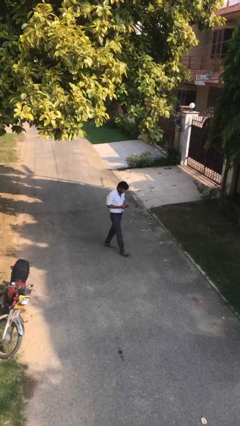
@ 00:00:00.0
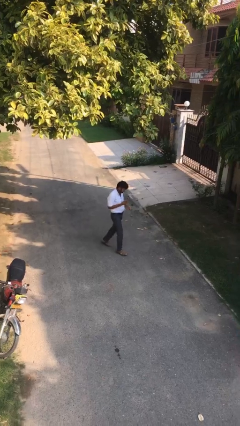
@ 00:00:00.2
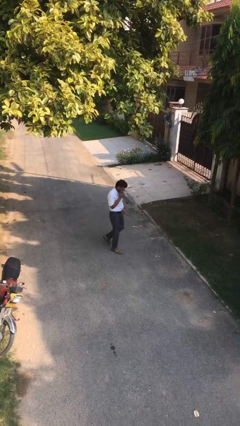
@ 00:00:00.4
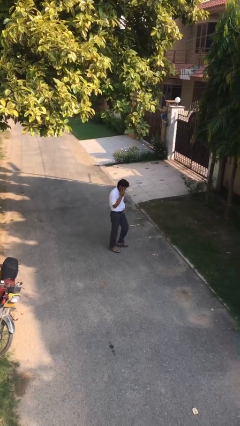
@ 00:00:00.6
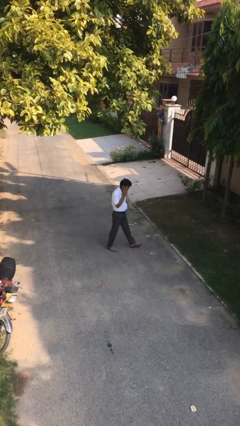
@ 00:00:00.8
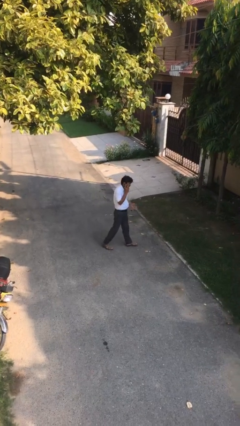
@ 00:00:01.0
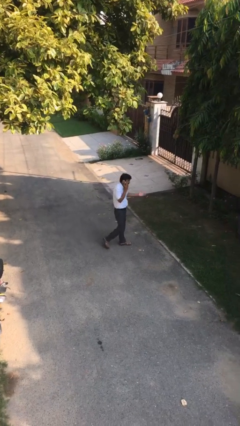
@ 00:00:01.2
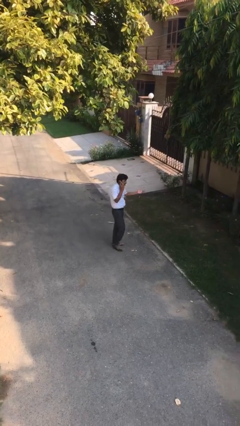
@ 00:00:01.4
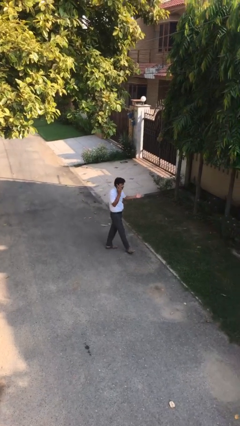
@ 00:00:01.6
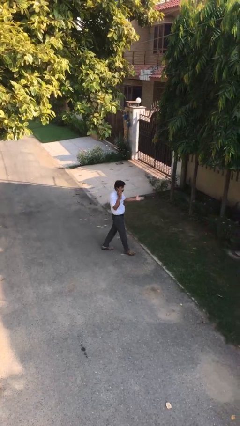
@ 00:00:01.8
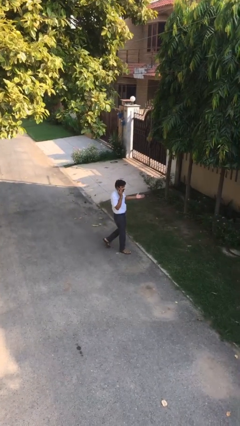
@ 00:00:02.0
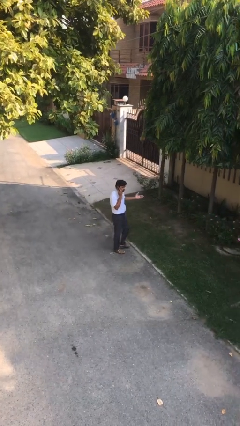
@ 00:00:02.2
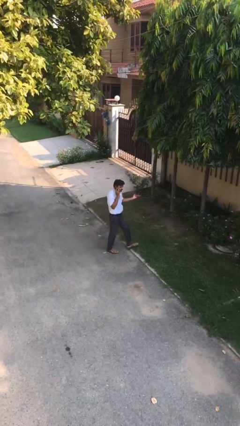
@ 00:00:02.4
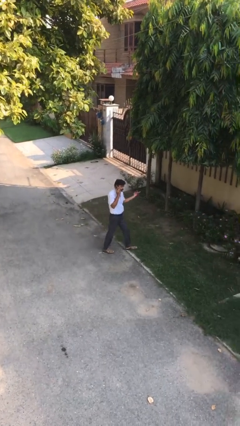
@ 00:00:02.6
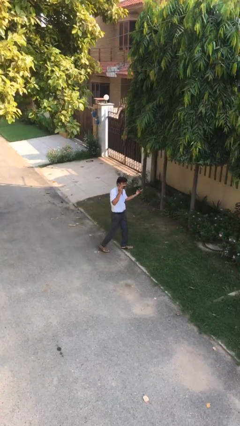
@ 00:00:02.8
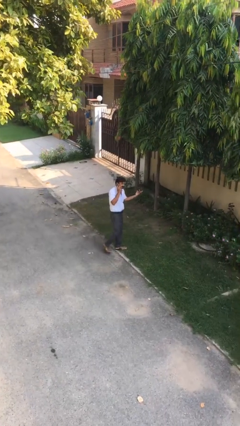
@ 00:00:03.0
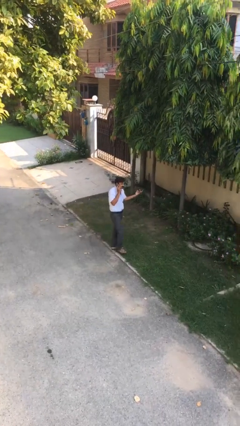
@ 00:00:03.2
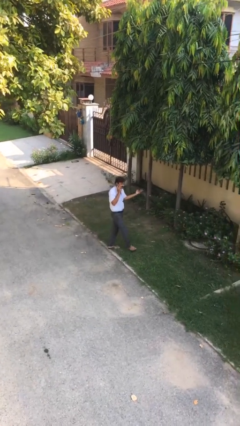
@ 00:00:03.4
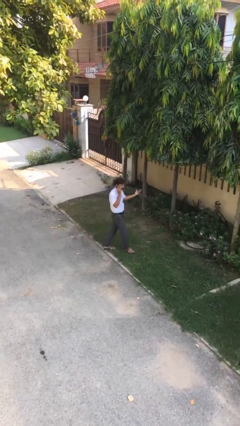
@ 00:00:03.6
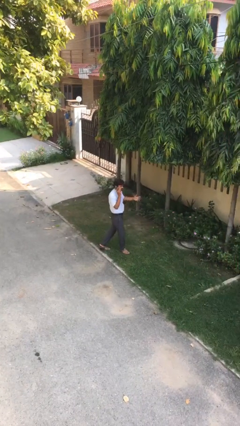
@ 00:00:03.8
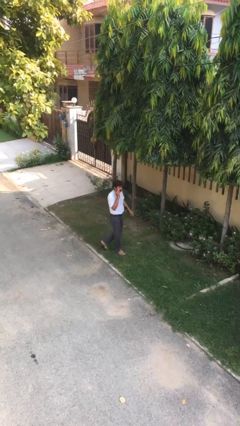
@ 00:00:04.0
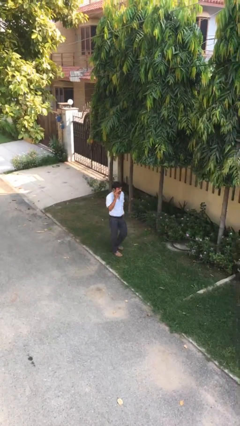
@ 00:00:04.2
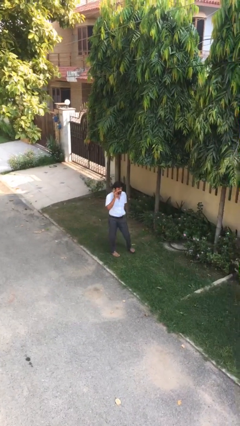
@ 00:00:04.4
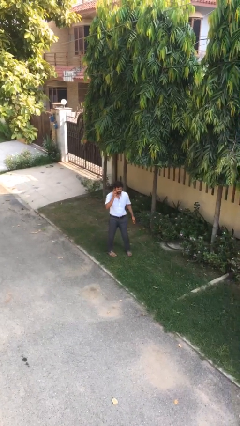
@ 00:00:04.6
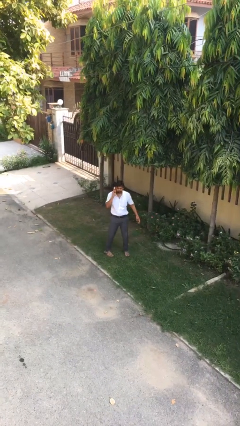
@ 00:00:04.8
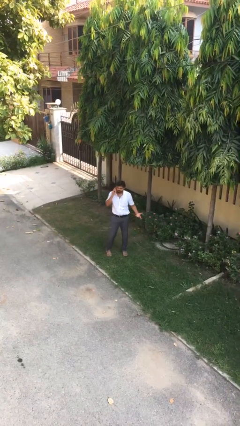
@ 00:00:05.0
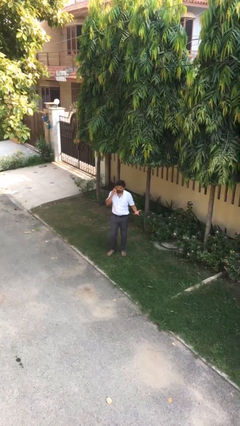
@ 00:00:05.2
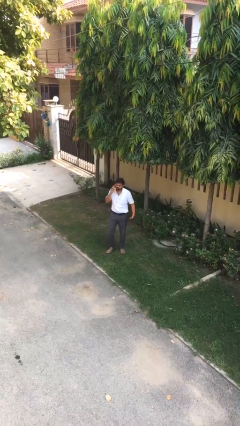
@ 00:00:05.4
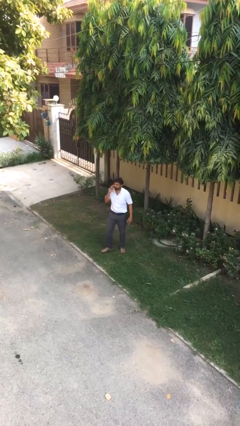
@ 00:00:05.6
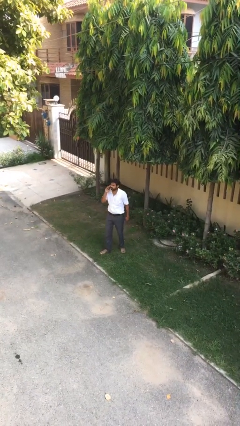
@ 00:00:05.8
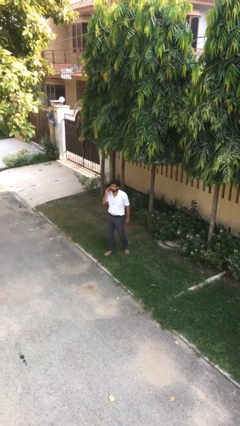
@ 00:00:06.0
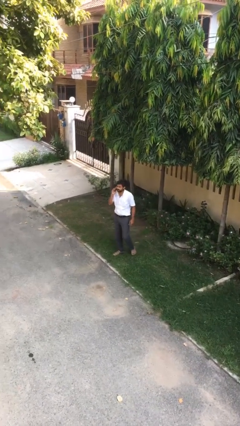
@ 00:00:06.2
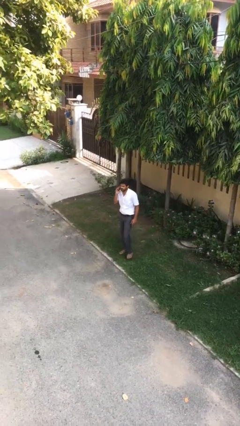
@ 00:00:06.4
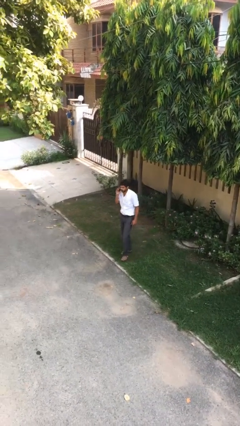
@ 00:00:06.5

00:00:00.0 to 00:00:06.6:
person talks on phone

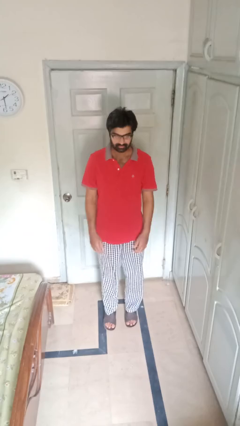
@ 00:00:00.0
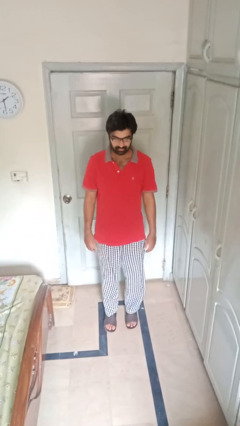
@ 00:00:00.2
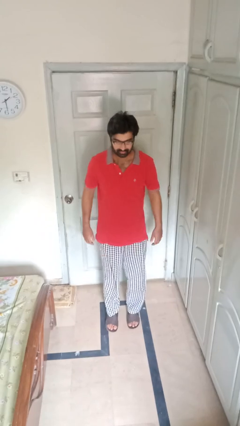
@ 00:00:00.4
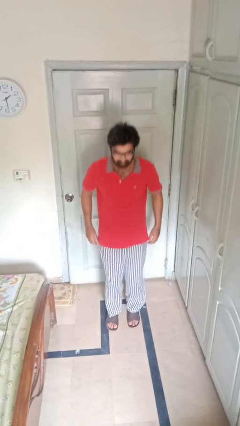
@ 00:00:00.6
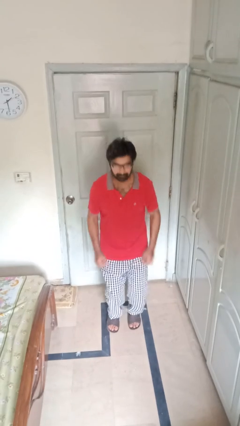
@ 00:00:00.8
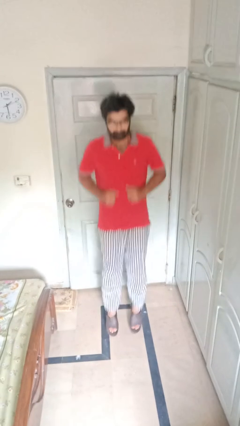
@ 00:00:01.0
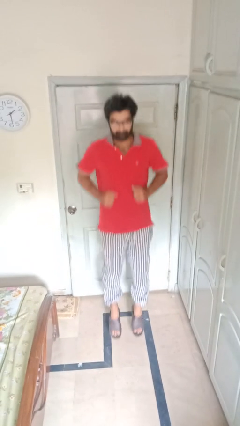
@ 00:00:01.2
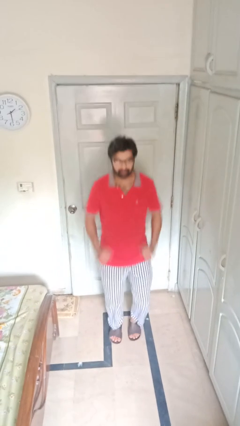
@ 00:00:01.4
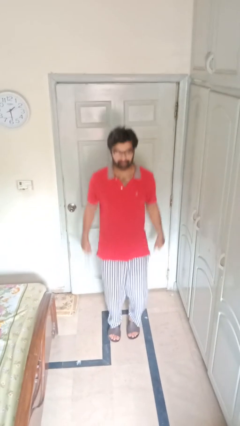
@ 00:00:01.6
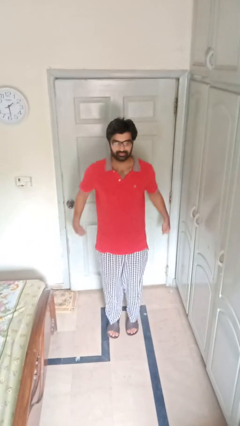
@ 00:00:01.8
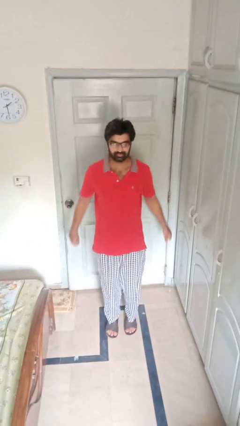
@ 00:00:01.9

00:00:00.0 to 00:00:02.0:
person jumps

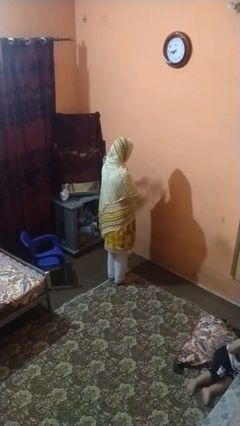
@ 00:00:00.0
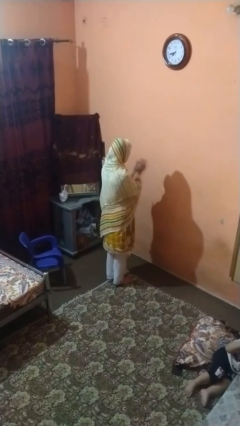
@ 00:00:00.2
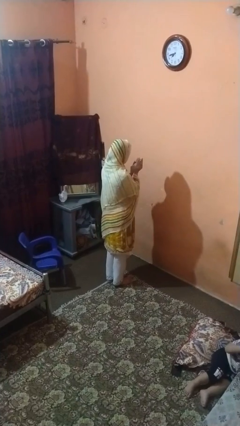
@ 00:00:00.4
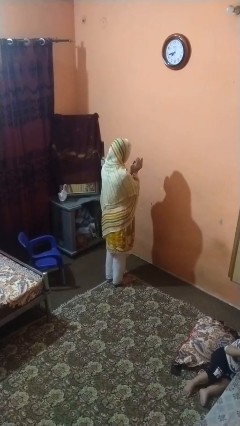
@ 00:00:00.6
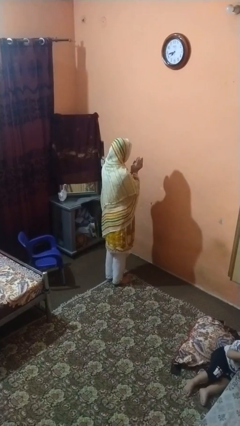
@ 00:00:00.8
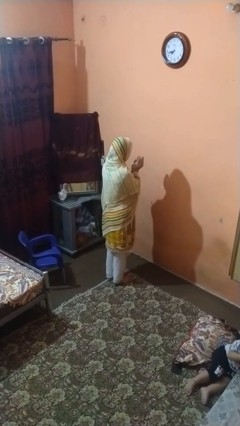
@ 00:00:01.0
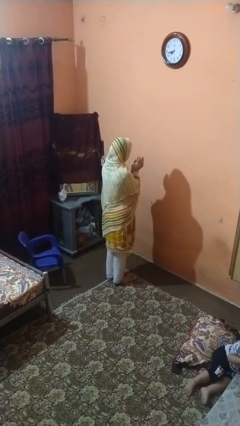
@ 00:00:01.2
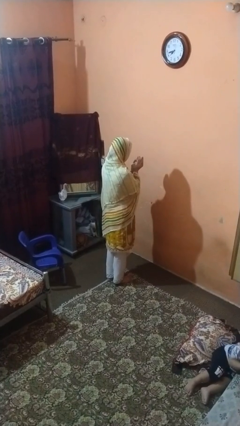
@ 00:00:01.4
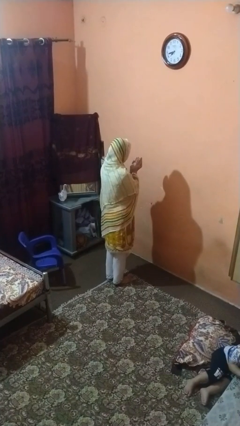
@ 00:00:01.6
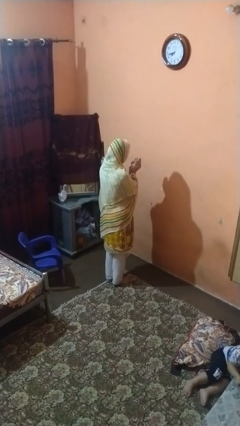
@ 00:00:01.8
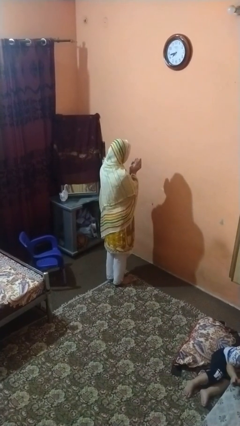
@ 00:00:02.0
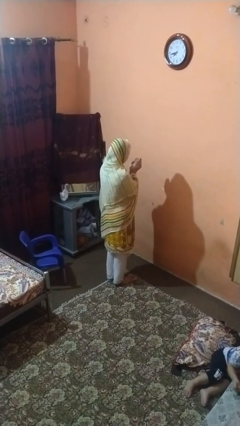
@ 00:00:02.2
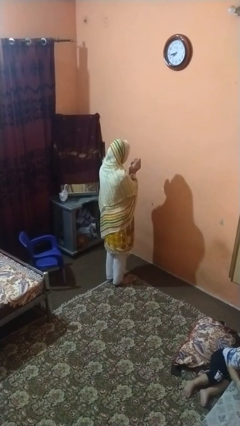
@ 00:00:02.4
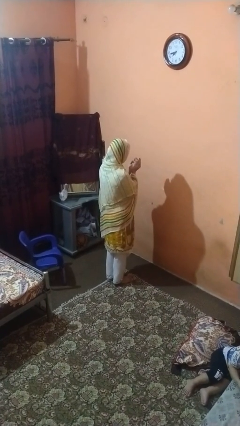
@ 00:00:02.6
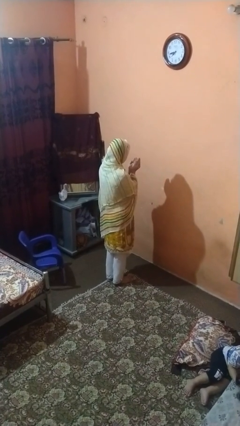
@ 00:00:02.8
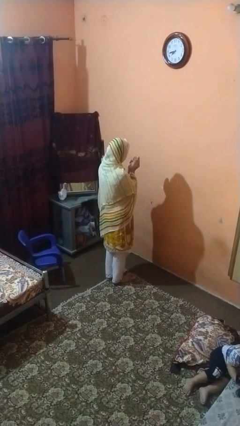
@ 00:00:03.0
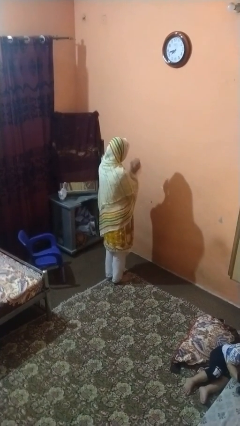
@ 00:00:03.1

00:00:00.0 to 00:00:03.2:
person prays

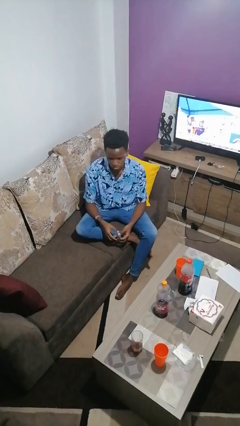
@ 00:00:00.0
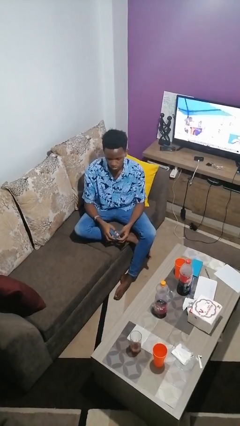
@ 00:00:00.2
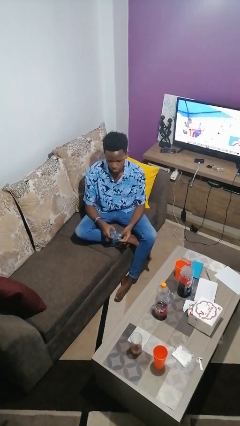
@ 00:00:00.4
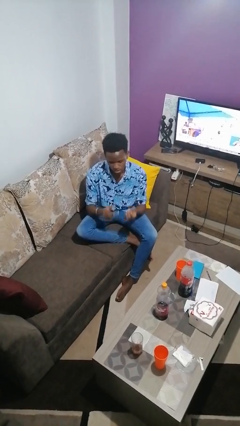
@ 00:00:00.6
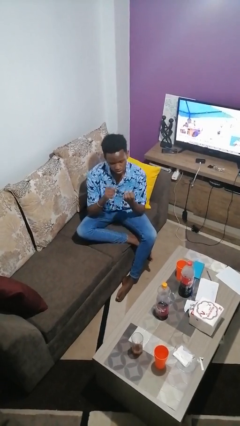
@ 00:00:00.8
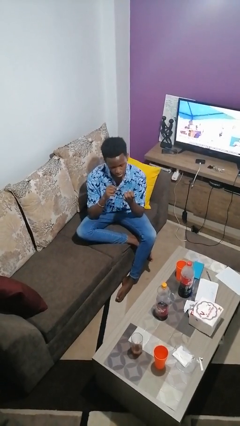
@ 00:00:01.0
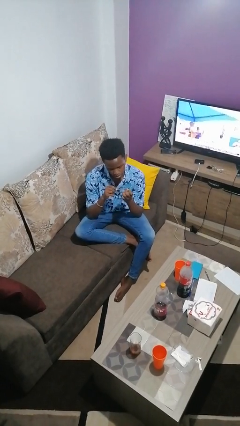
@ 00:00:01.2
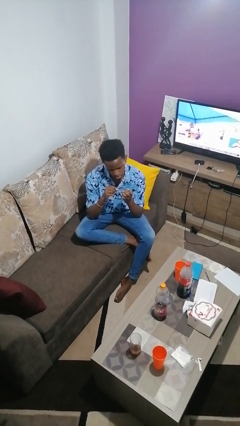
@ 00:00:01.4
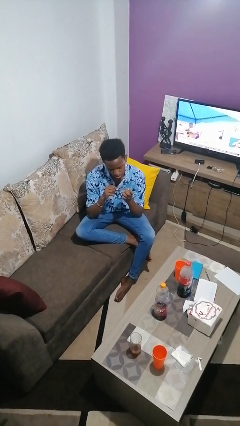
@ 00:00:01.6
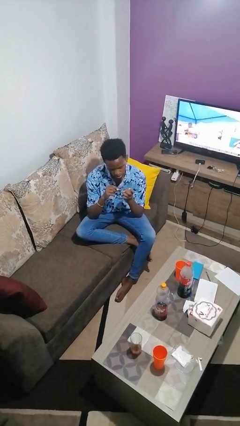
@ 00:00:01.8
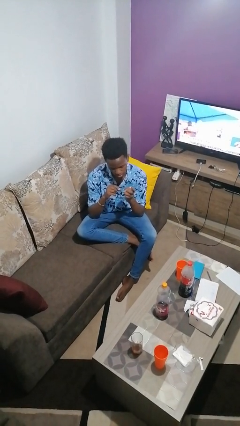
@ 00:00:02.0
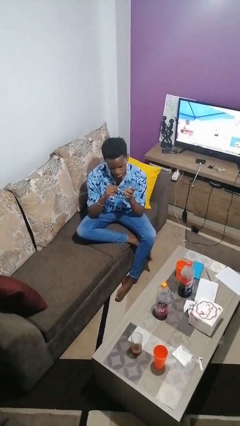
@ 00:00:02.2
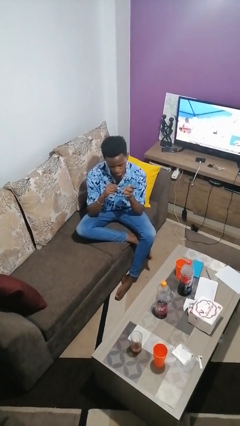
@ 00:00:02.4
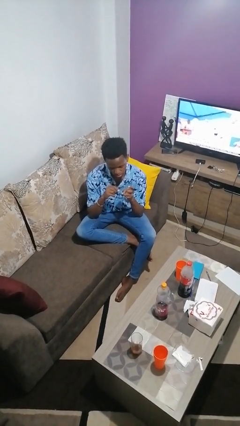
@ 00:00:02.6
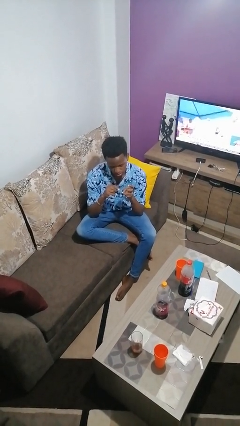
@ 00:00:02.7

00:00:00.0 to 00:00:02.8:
person clips fingernails

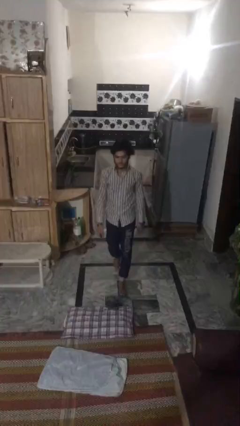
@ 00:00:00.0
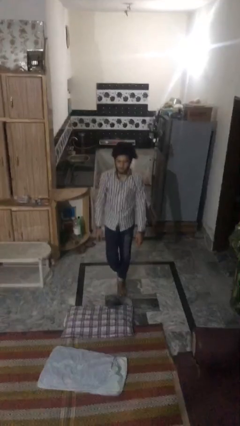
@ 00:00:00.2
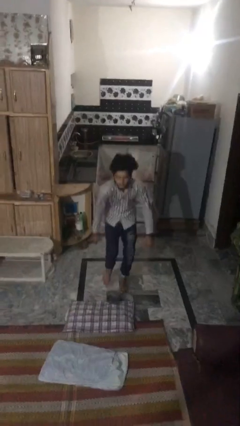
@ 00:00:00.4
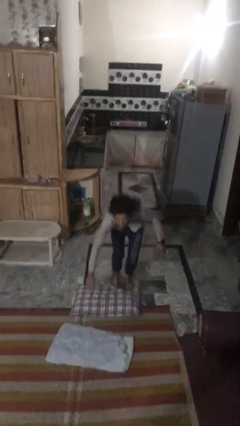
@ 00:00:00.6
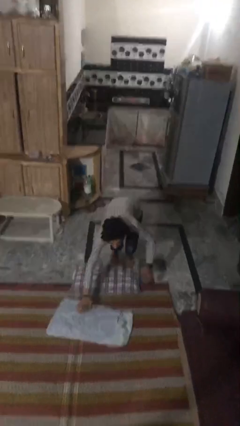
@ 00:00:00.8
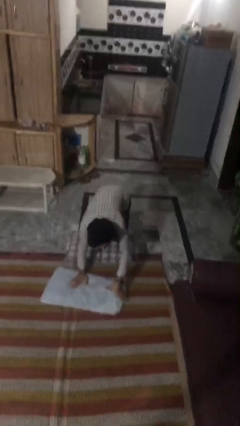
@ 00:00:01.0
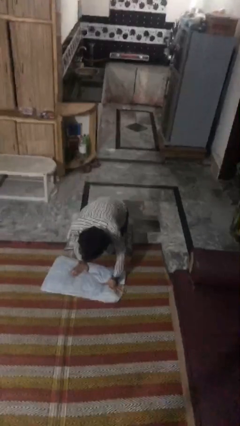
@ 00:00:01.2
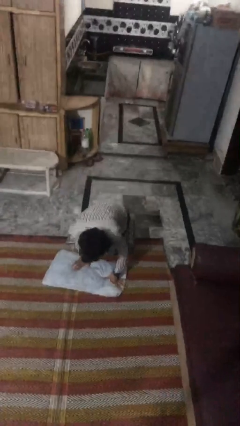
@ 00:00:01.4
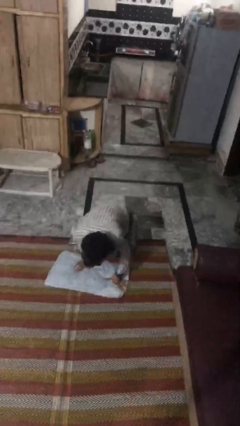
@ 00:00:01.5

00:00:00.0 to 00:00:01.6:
person trips on object on floor

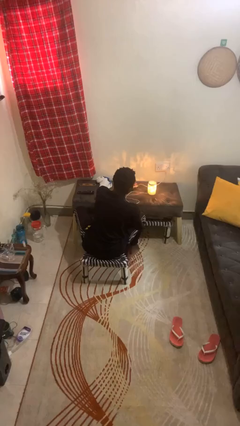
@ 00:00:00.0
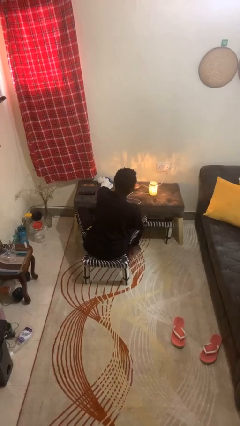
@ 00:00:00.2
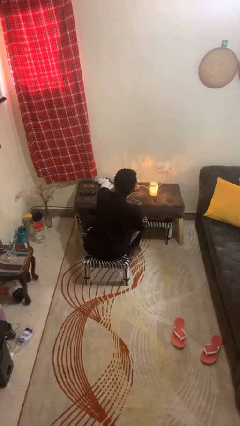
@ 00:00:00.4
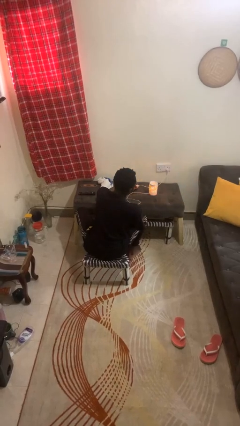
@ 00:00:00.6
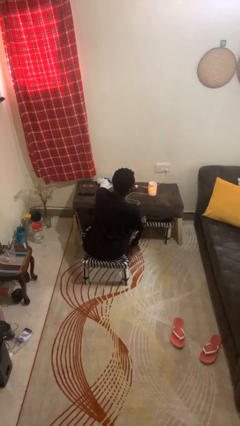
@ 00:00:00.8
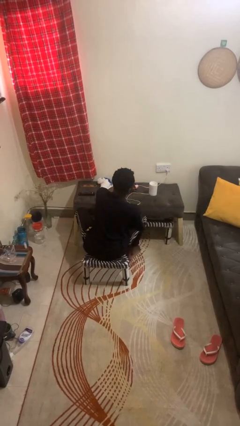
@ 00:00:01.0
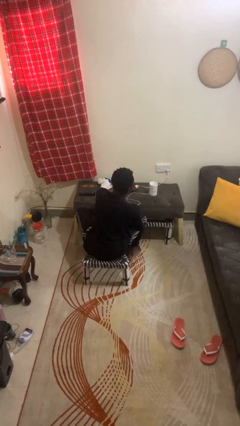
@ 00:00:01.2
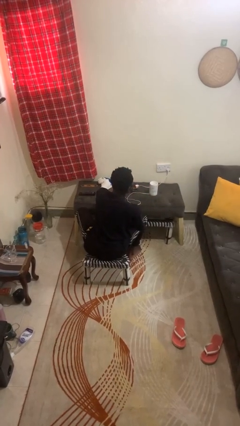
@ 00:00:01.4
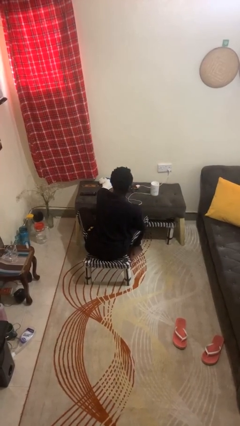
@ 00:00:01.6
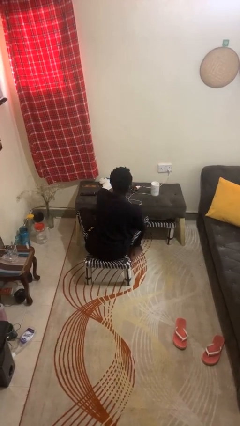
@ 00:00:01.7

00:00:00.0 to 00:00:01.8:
person turns off lamp
